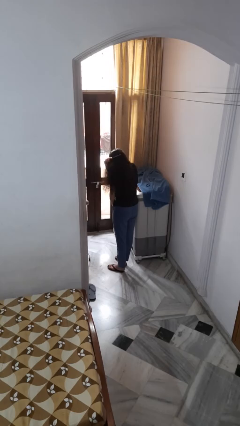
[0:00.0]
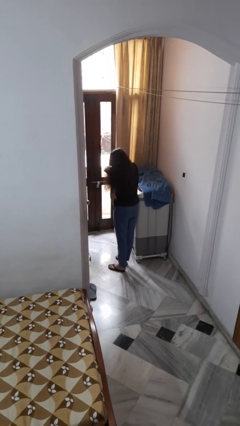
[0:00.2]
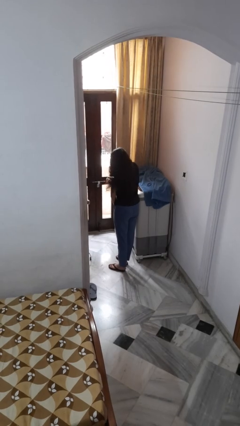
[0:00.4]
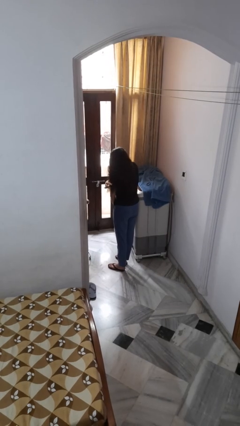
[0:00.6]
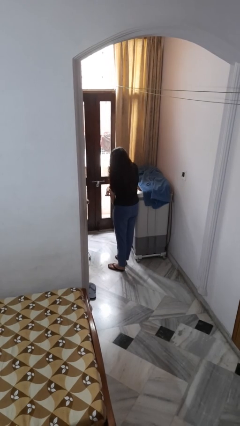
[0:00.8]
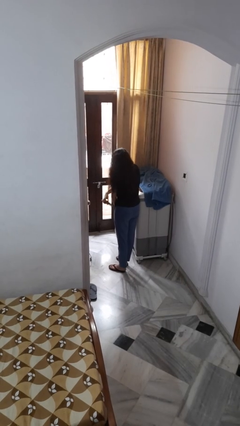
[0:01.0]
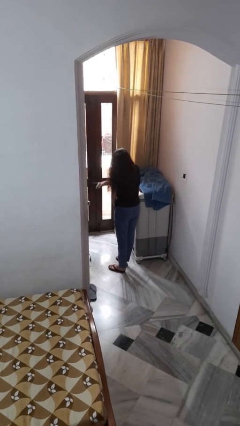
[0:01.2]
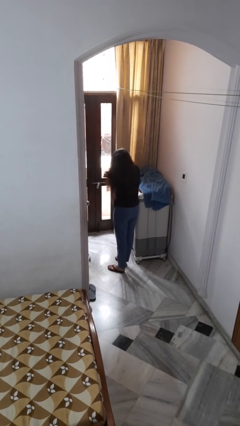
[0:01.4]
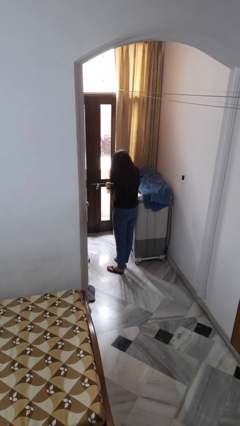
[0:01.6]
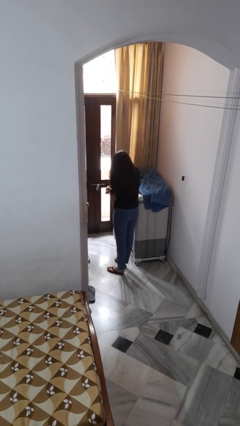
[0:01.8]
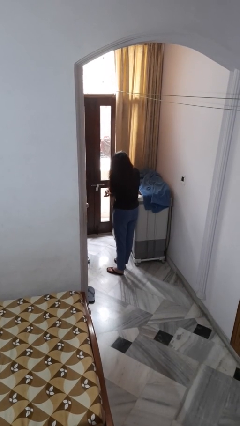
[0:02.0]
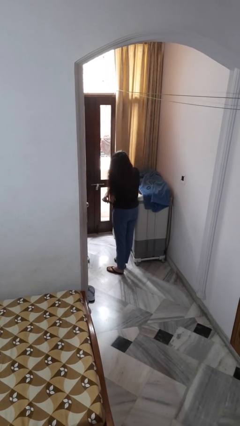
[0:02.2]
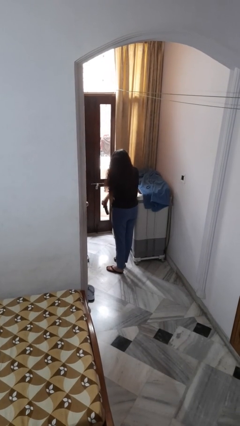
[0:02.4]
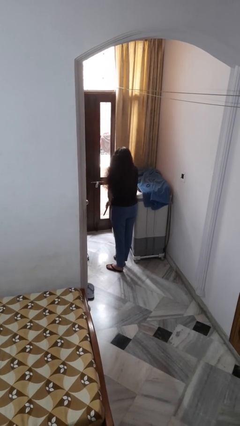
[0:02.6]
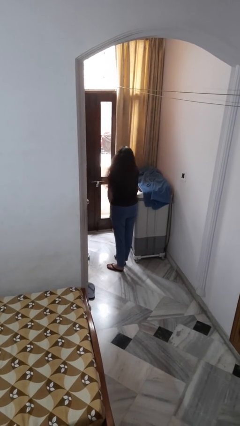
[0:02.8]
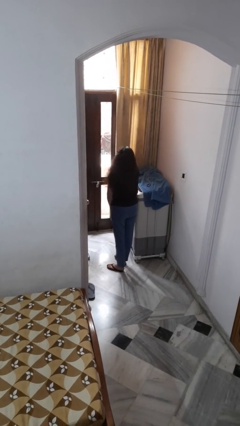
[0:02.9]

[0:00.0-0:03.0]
person brushes hair

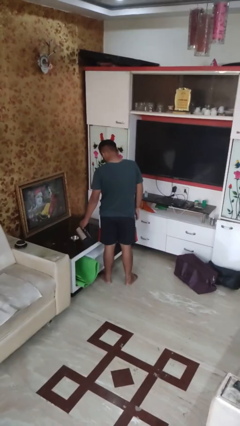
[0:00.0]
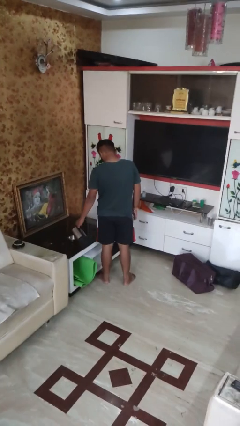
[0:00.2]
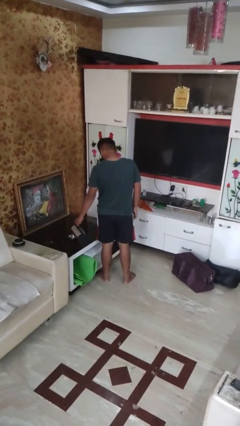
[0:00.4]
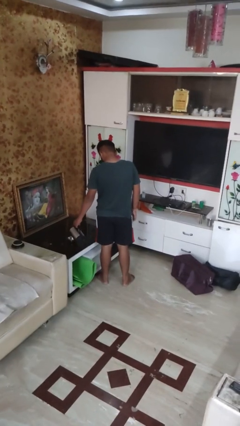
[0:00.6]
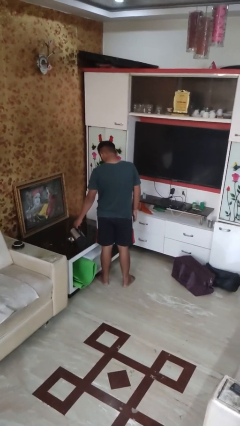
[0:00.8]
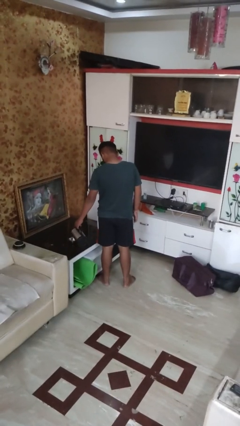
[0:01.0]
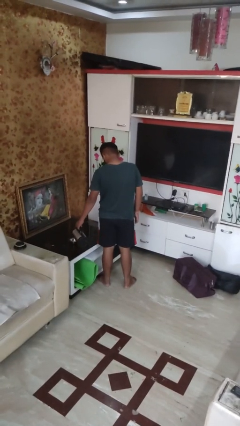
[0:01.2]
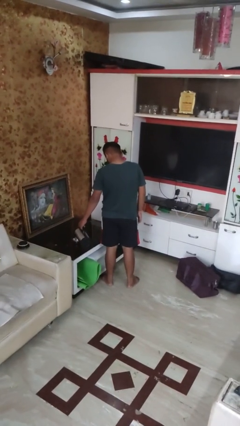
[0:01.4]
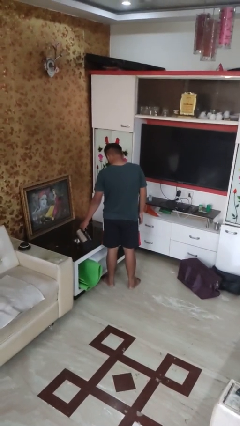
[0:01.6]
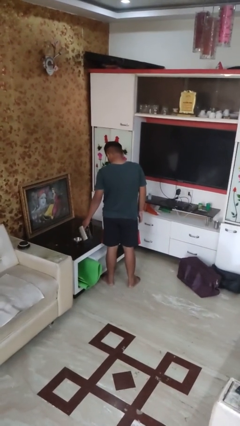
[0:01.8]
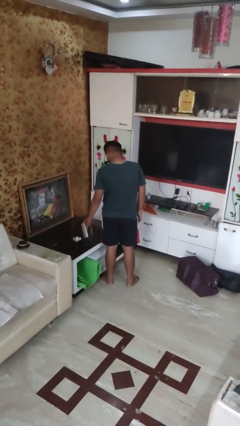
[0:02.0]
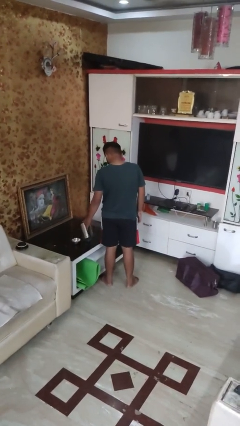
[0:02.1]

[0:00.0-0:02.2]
person pours into bowl

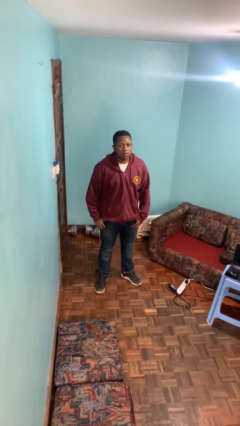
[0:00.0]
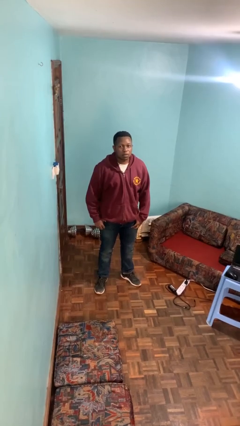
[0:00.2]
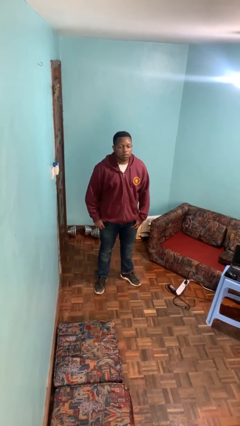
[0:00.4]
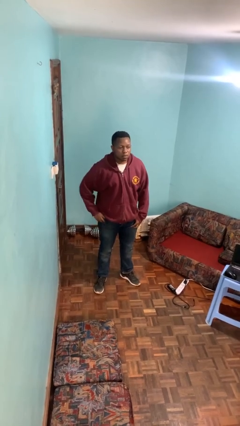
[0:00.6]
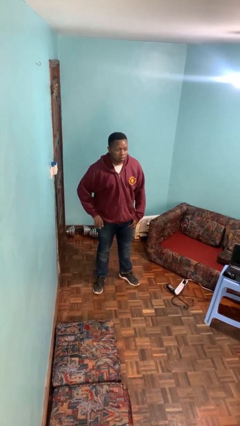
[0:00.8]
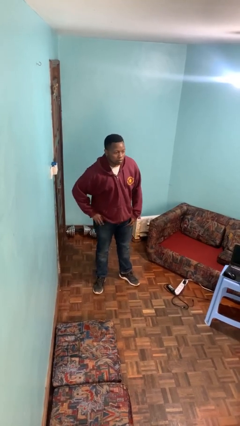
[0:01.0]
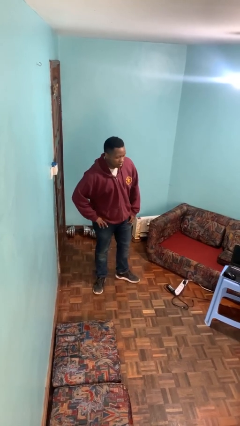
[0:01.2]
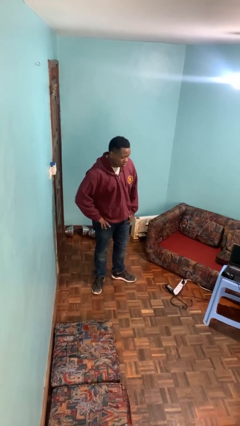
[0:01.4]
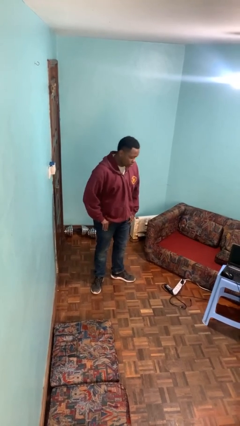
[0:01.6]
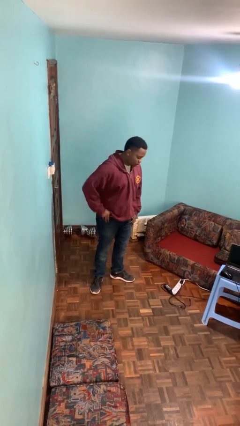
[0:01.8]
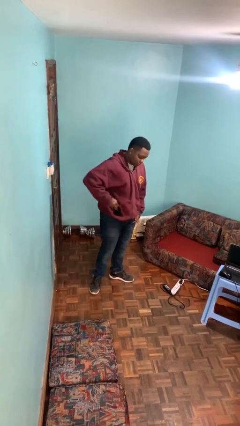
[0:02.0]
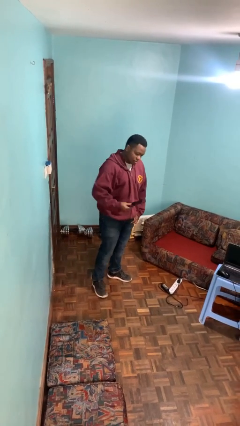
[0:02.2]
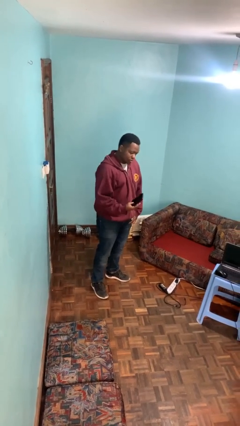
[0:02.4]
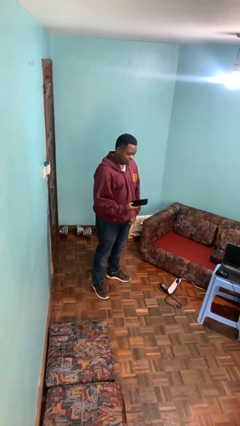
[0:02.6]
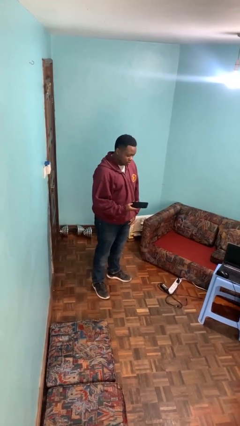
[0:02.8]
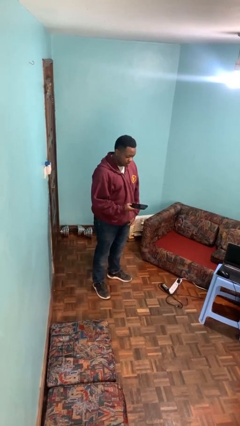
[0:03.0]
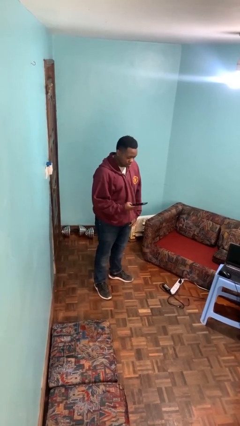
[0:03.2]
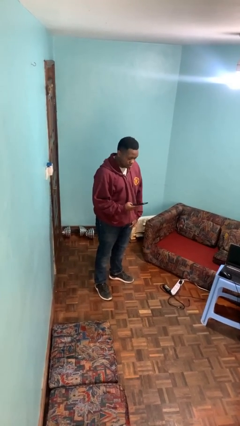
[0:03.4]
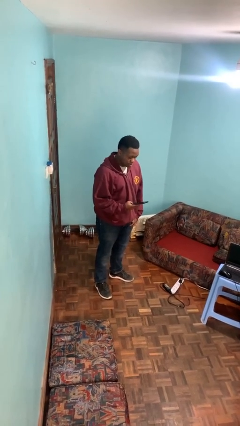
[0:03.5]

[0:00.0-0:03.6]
person takes phone from pocket

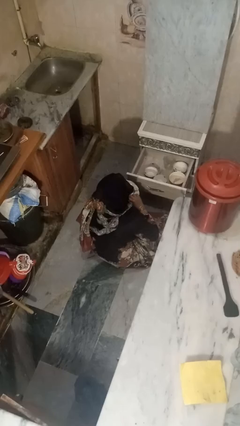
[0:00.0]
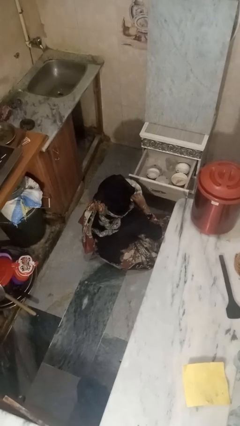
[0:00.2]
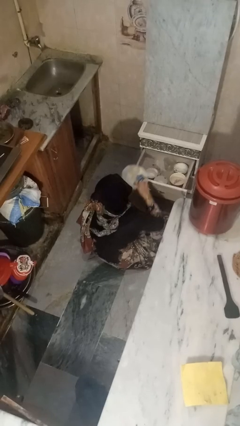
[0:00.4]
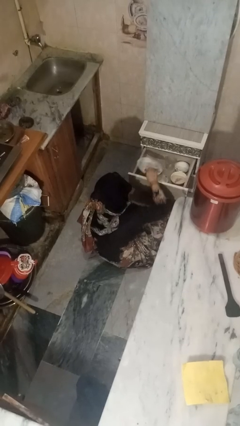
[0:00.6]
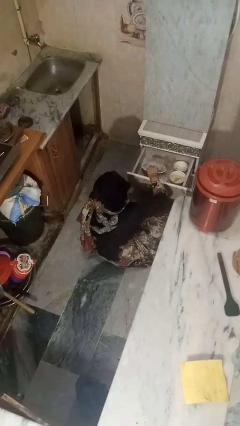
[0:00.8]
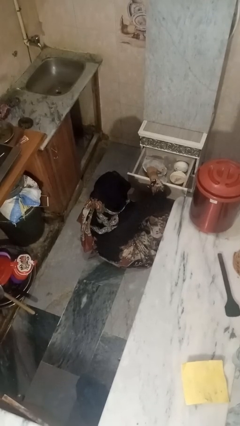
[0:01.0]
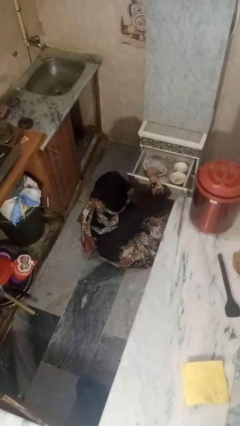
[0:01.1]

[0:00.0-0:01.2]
person puts object into kitchen drawer

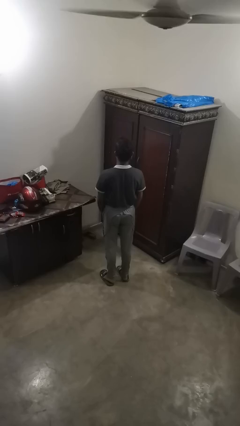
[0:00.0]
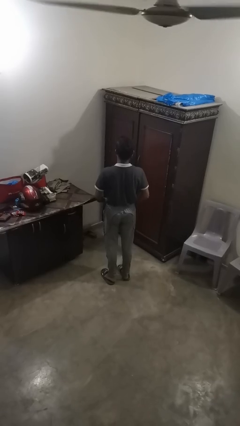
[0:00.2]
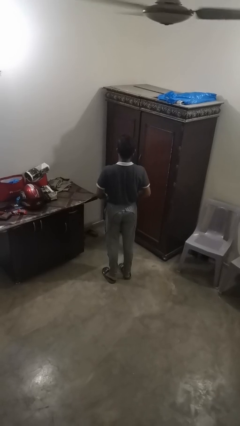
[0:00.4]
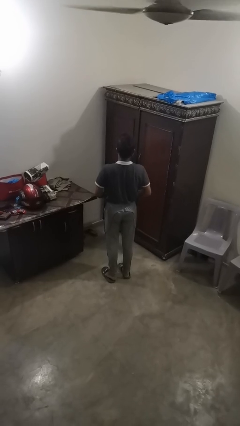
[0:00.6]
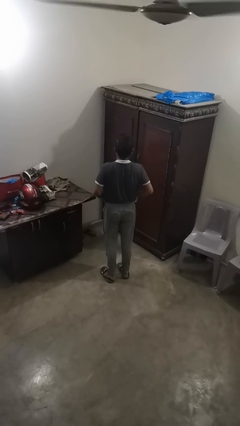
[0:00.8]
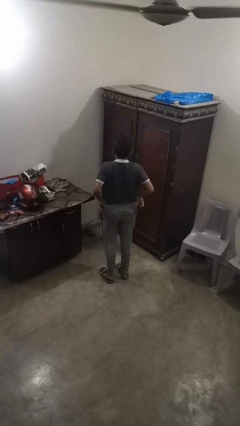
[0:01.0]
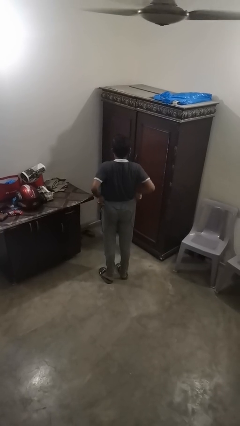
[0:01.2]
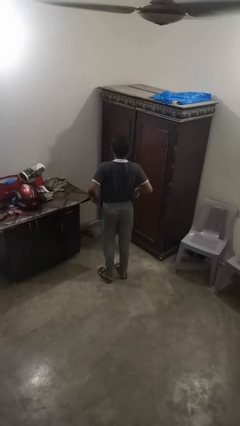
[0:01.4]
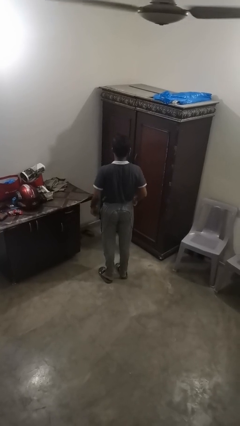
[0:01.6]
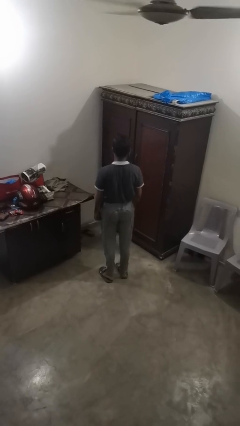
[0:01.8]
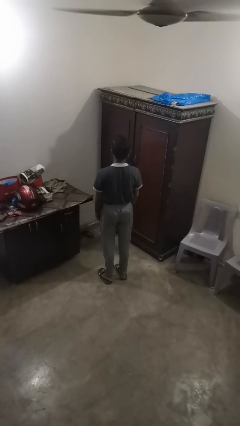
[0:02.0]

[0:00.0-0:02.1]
person hikes up pants

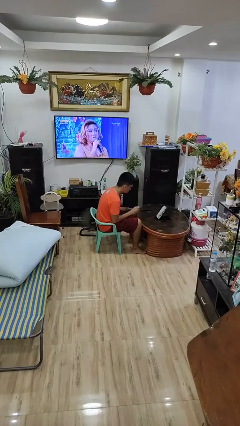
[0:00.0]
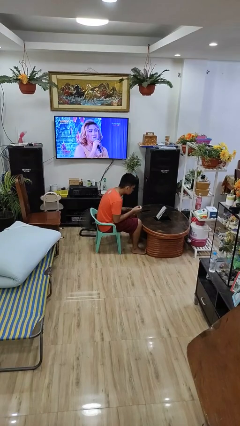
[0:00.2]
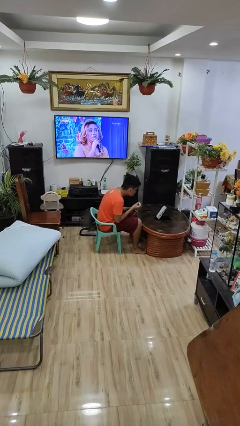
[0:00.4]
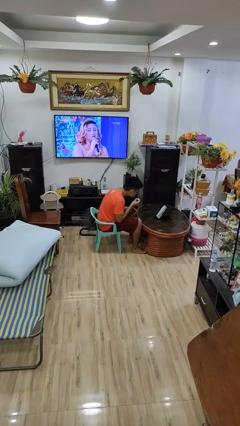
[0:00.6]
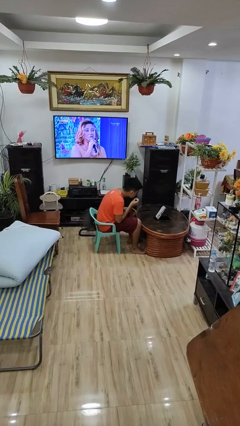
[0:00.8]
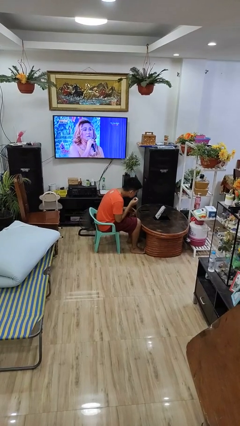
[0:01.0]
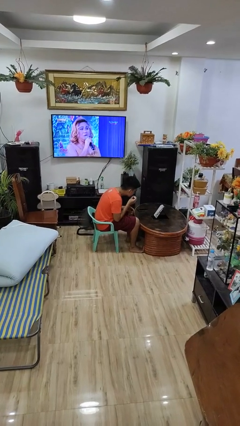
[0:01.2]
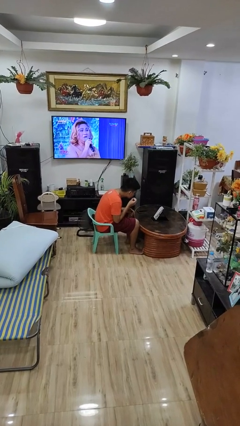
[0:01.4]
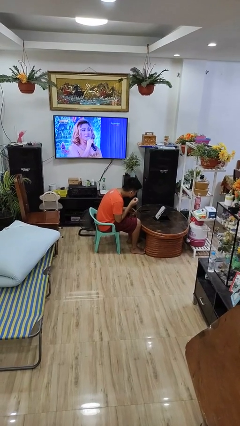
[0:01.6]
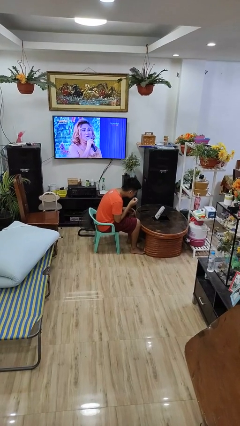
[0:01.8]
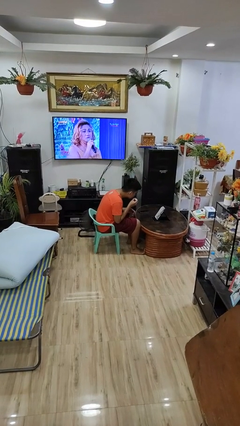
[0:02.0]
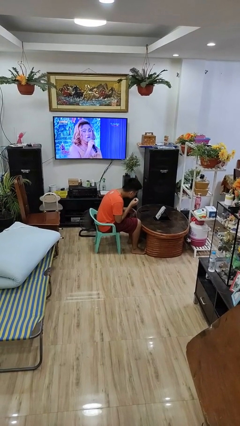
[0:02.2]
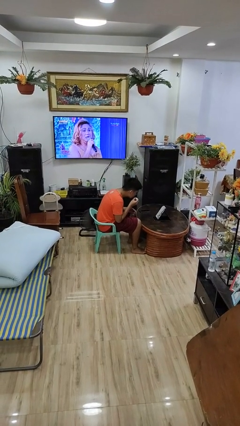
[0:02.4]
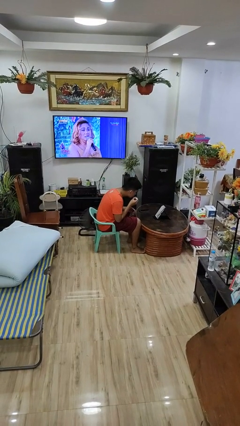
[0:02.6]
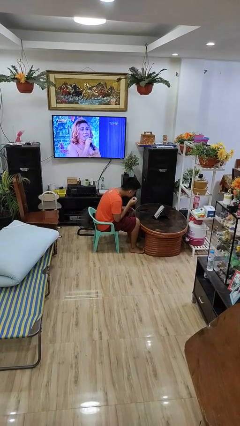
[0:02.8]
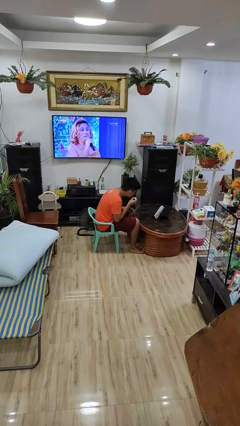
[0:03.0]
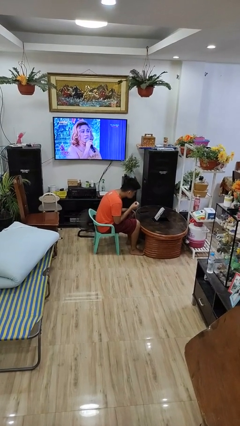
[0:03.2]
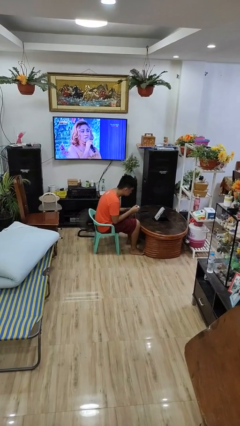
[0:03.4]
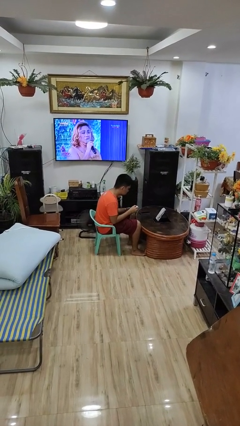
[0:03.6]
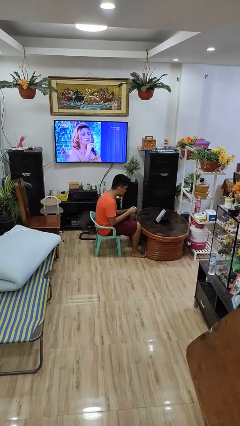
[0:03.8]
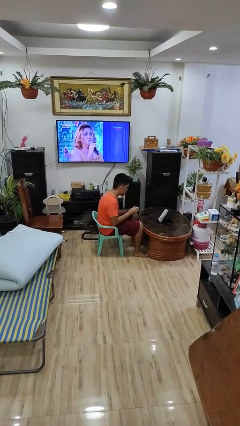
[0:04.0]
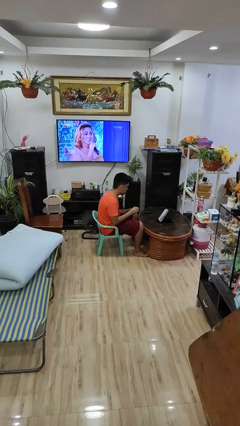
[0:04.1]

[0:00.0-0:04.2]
person applies lip makeup

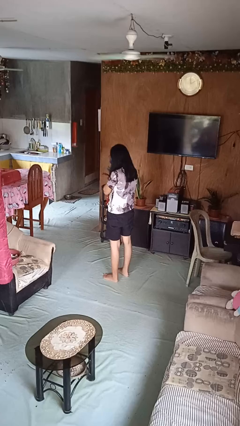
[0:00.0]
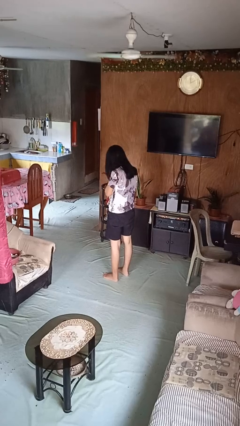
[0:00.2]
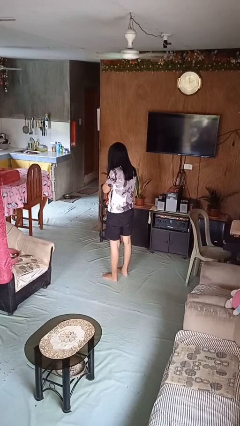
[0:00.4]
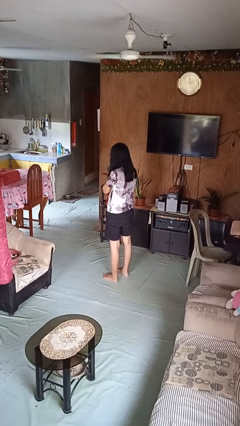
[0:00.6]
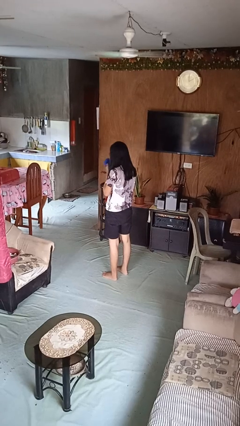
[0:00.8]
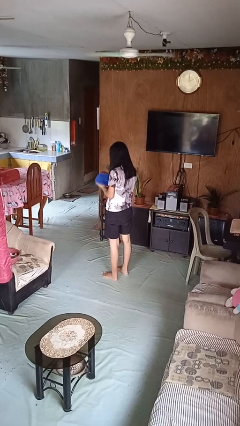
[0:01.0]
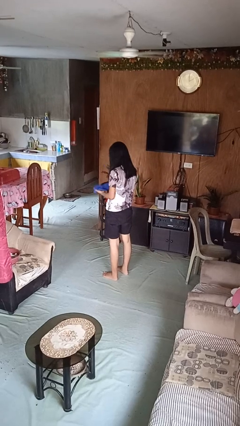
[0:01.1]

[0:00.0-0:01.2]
person blows nose
